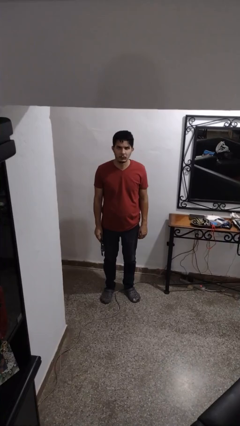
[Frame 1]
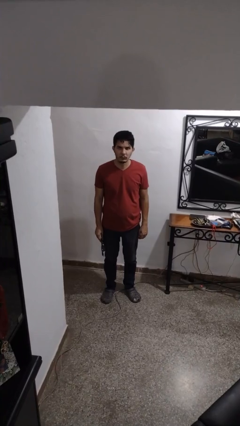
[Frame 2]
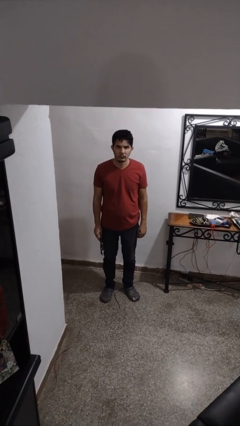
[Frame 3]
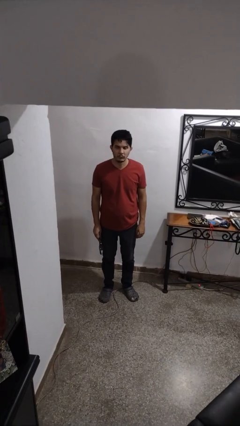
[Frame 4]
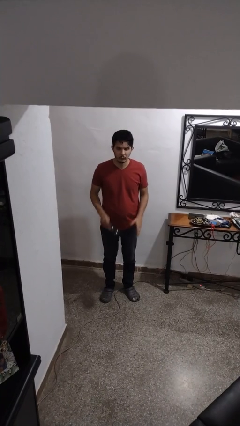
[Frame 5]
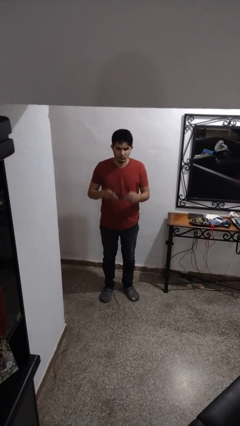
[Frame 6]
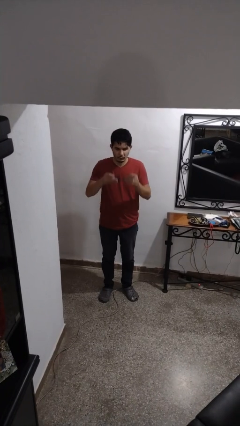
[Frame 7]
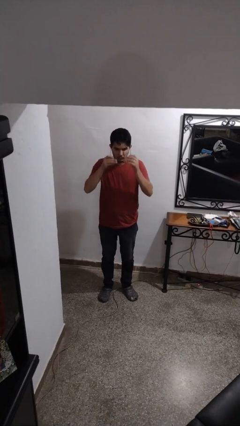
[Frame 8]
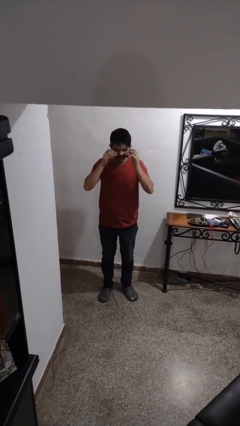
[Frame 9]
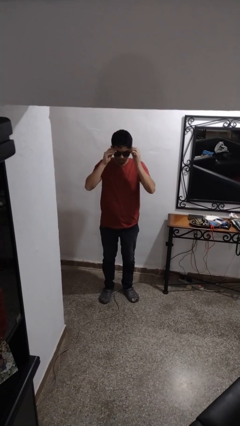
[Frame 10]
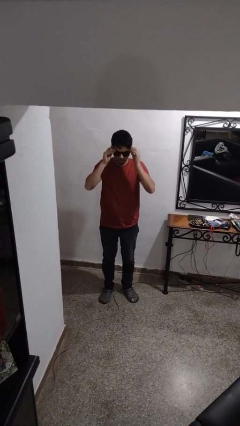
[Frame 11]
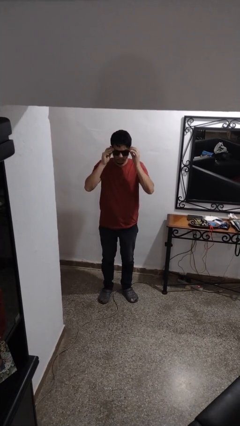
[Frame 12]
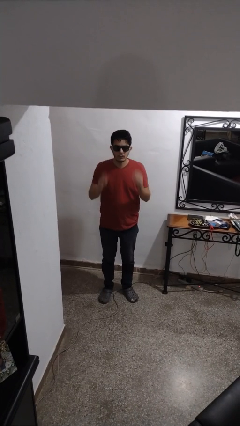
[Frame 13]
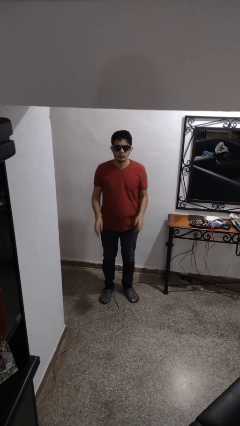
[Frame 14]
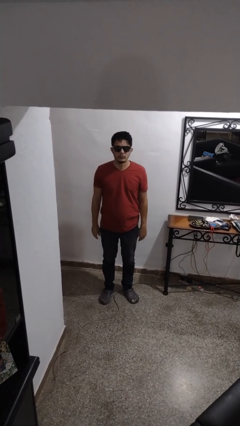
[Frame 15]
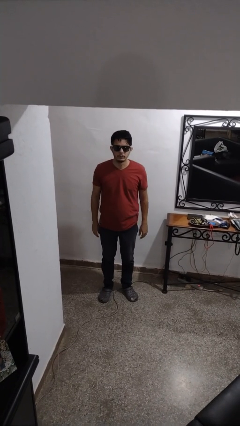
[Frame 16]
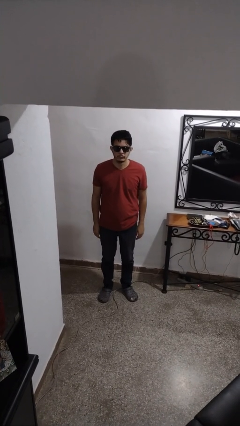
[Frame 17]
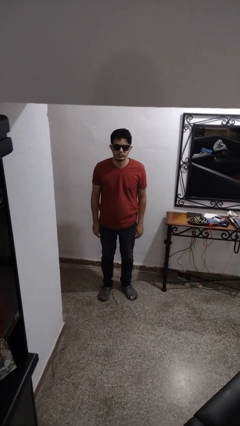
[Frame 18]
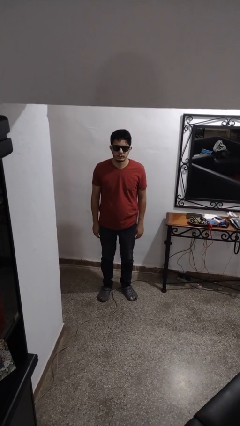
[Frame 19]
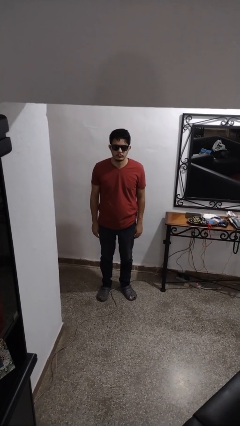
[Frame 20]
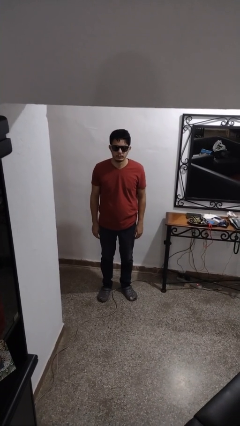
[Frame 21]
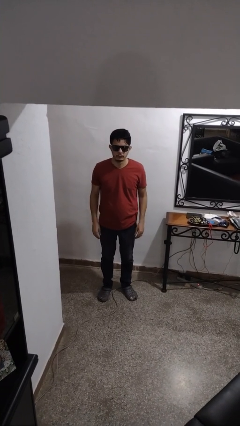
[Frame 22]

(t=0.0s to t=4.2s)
person puts on sunglasses

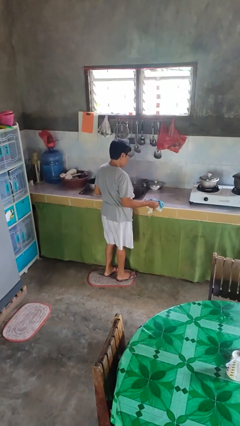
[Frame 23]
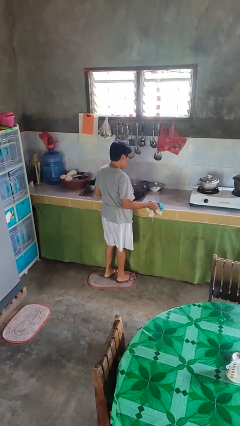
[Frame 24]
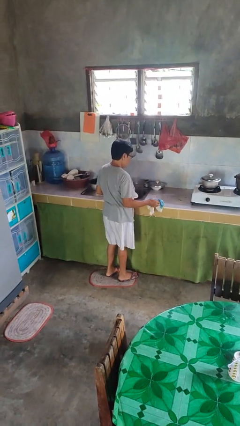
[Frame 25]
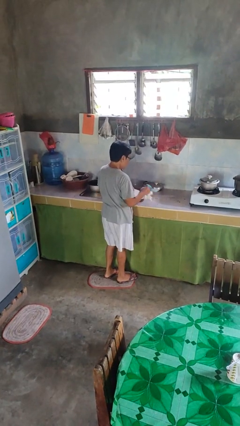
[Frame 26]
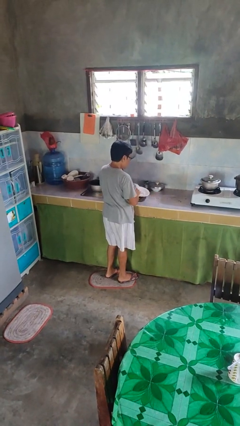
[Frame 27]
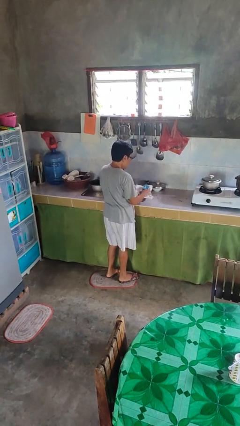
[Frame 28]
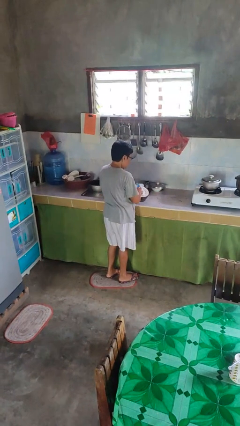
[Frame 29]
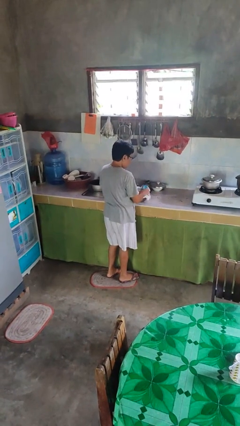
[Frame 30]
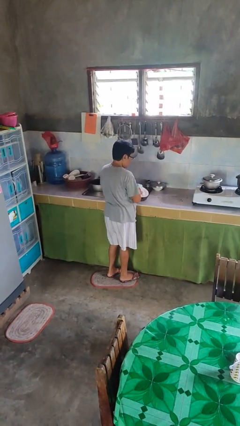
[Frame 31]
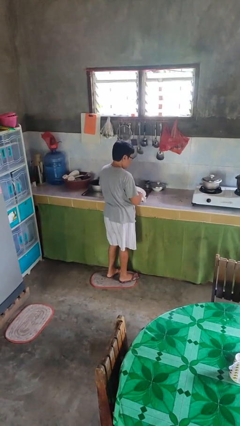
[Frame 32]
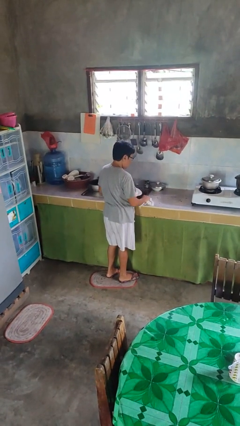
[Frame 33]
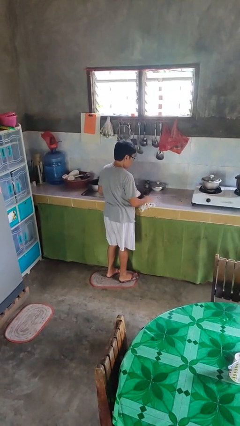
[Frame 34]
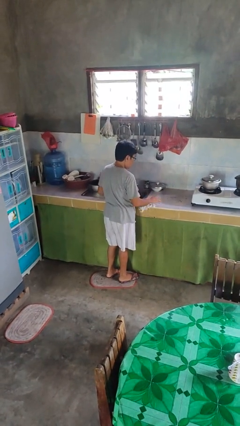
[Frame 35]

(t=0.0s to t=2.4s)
person dries dish

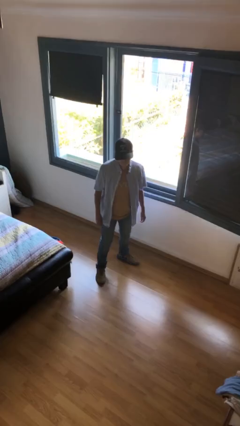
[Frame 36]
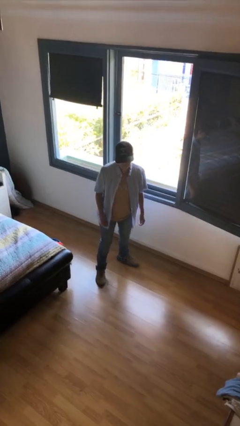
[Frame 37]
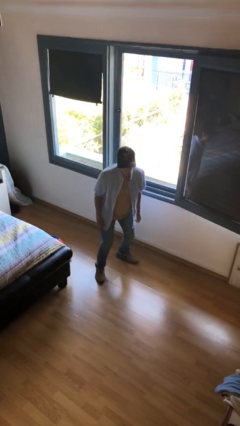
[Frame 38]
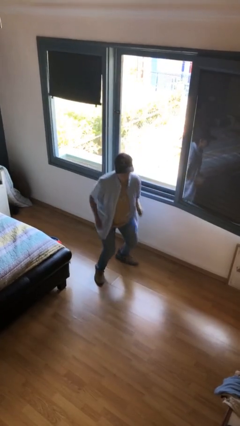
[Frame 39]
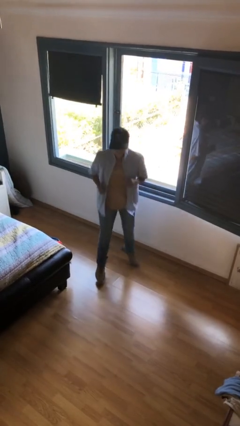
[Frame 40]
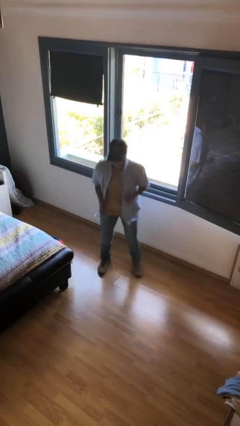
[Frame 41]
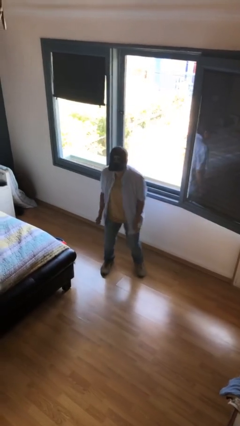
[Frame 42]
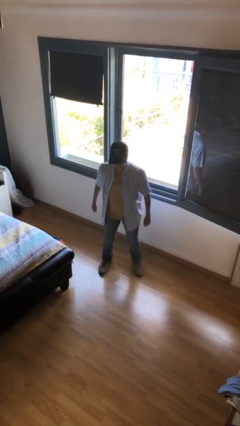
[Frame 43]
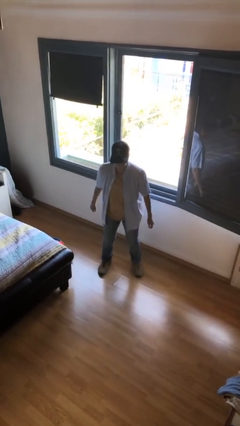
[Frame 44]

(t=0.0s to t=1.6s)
person jumps

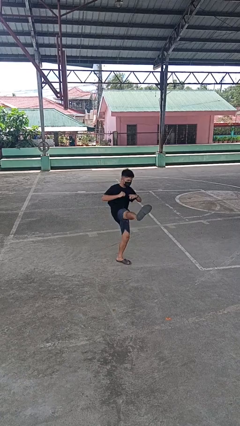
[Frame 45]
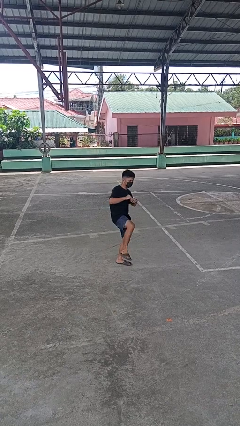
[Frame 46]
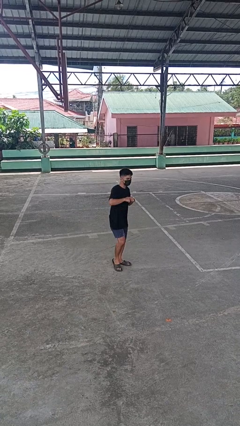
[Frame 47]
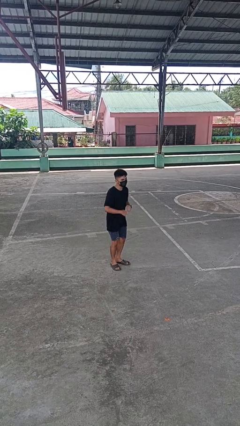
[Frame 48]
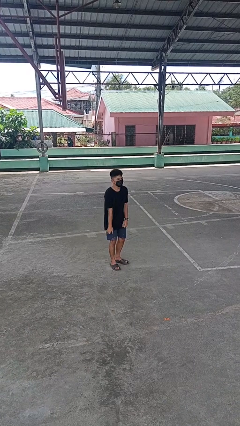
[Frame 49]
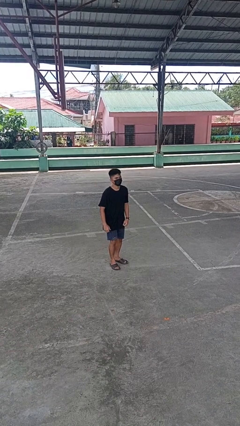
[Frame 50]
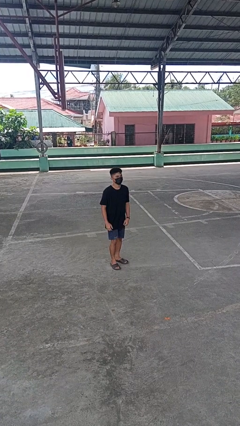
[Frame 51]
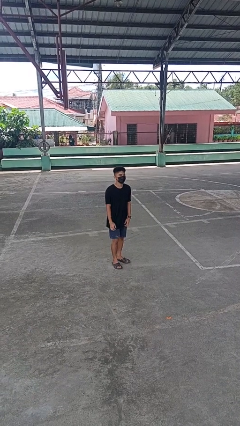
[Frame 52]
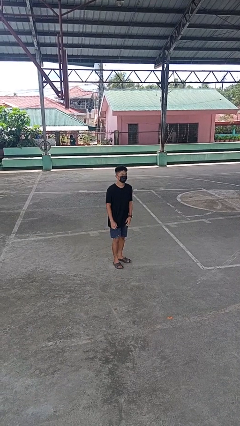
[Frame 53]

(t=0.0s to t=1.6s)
person karate kicks

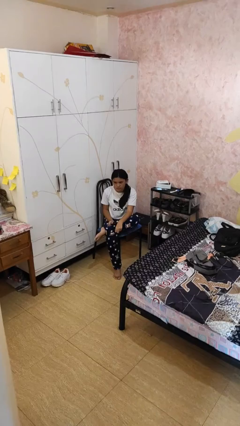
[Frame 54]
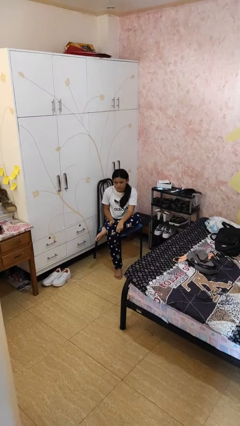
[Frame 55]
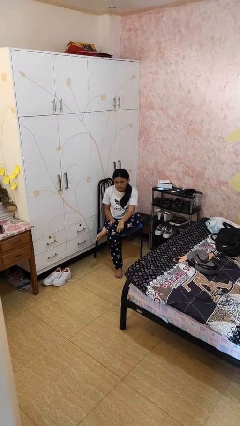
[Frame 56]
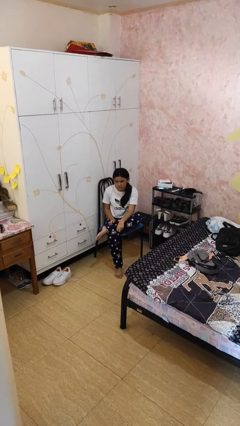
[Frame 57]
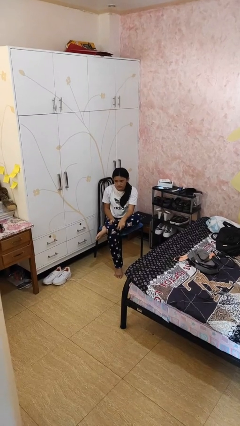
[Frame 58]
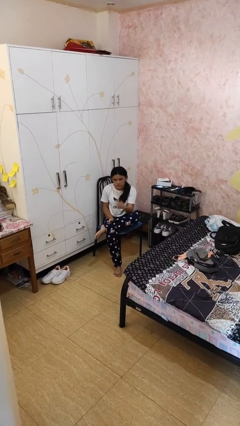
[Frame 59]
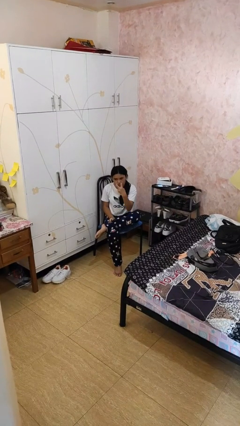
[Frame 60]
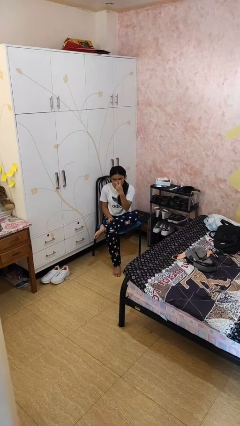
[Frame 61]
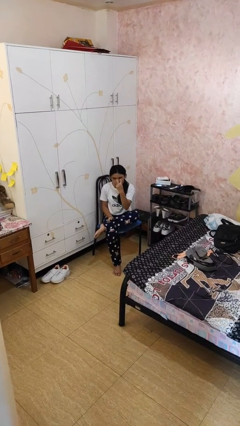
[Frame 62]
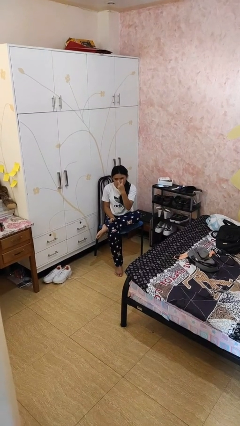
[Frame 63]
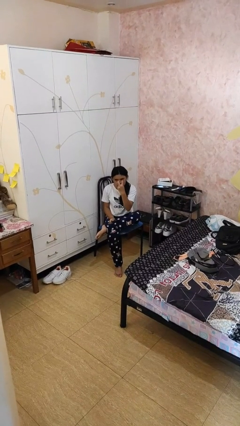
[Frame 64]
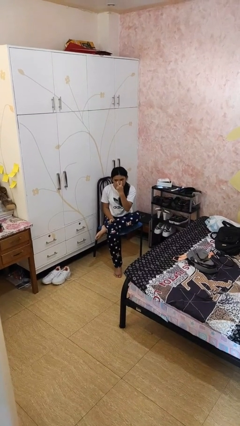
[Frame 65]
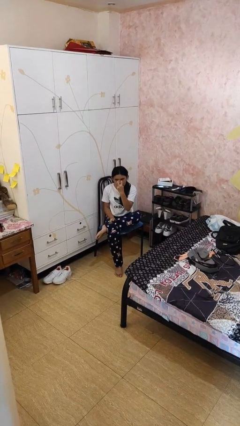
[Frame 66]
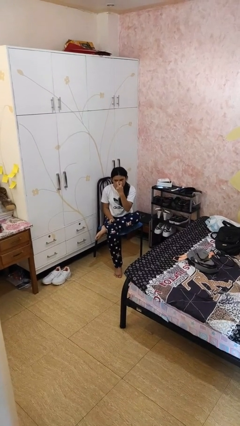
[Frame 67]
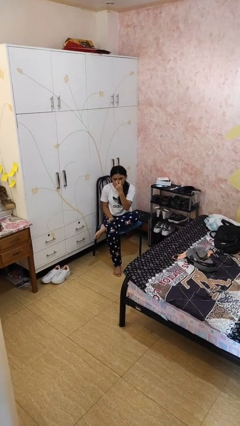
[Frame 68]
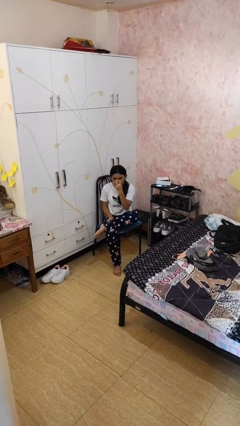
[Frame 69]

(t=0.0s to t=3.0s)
person gestures watch closely

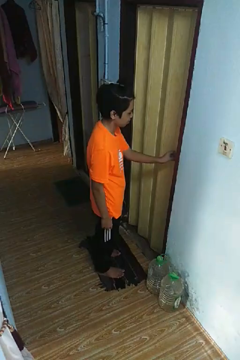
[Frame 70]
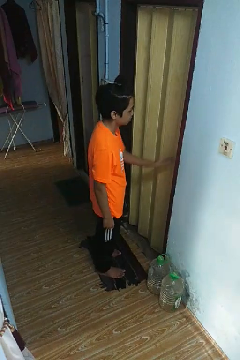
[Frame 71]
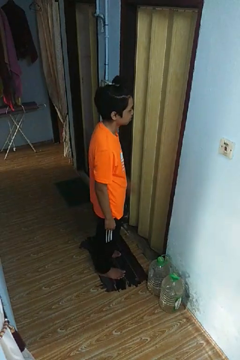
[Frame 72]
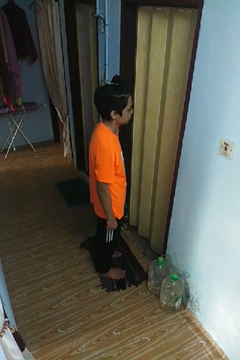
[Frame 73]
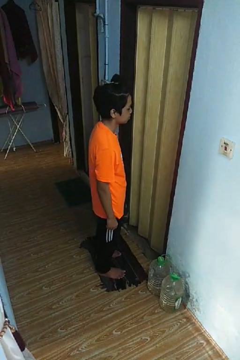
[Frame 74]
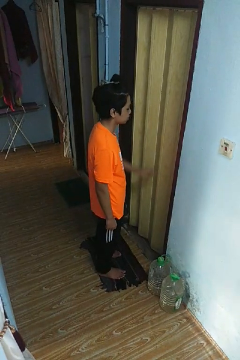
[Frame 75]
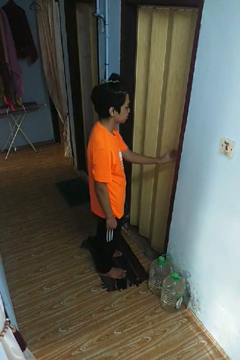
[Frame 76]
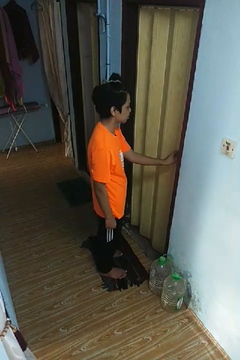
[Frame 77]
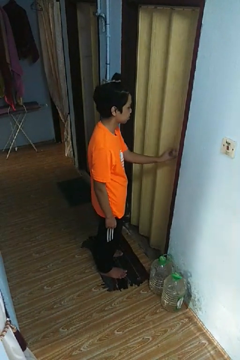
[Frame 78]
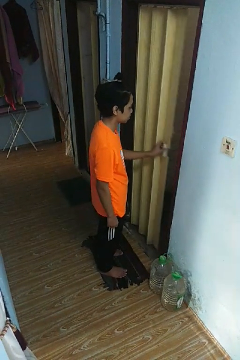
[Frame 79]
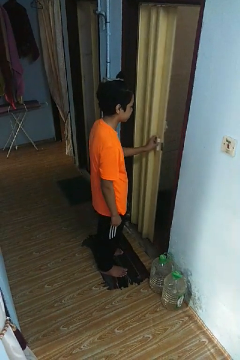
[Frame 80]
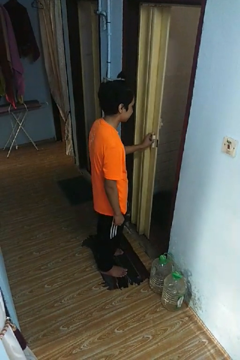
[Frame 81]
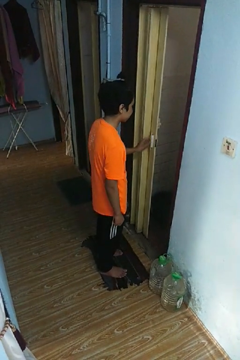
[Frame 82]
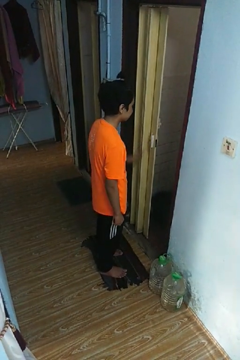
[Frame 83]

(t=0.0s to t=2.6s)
person opens sliding door

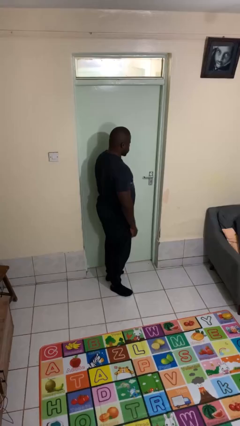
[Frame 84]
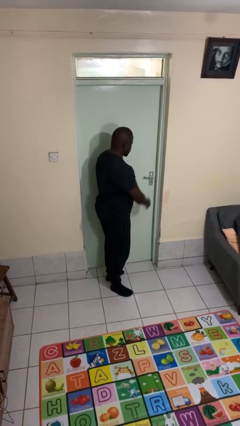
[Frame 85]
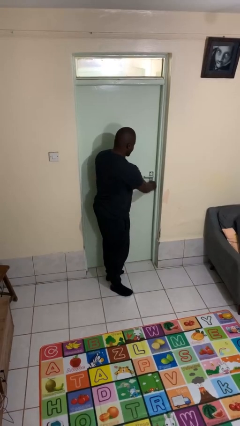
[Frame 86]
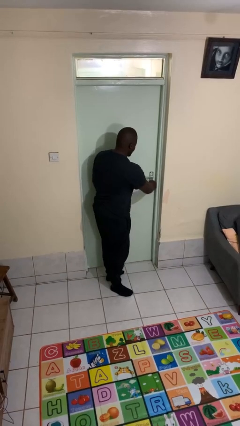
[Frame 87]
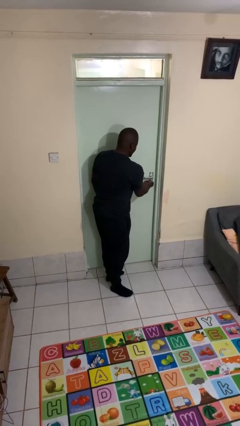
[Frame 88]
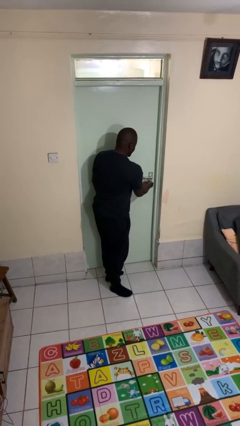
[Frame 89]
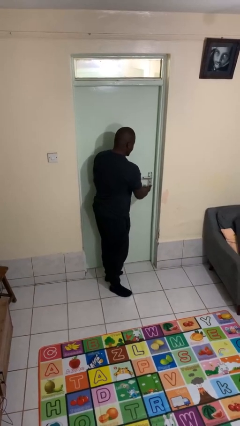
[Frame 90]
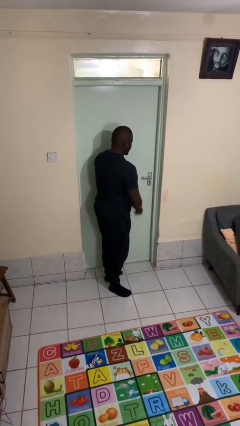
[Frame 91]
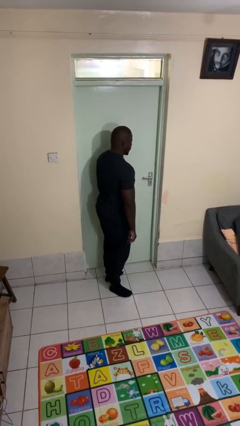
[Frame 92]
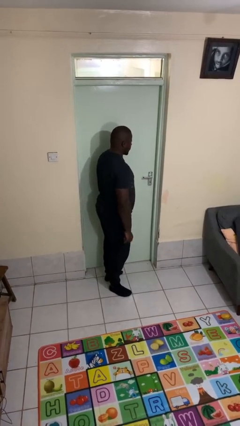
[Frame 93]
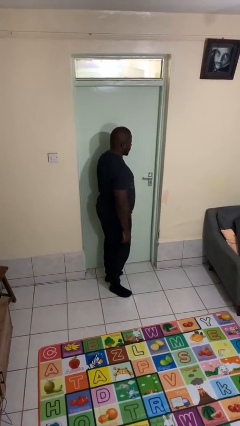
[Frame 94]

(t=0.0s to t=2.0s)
person locks door with keys

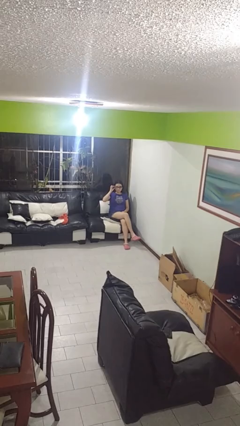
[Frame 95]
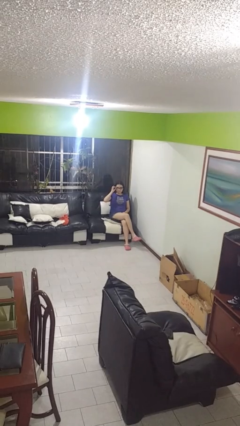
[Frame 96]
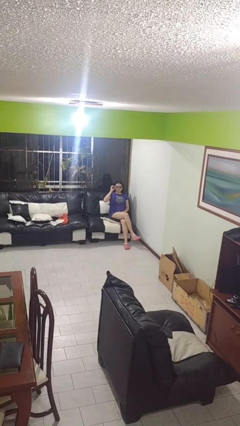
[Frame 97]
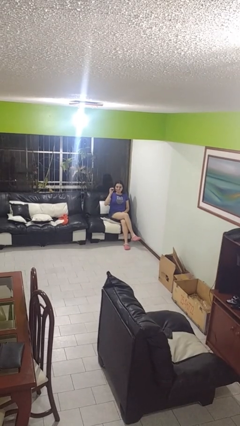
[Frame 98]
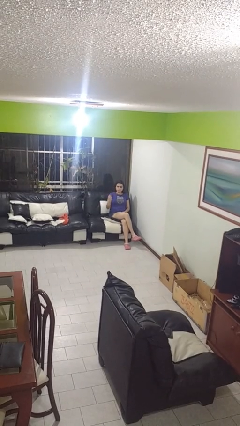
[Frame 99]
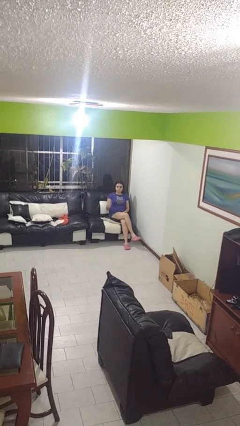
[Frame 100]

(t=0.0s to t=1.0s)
person takes off glasses
